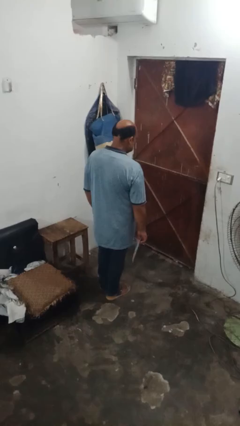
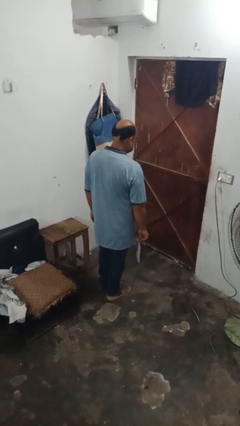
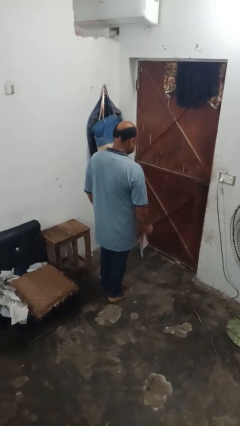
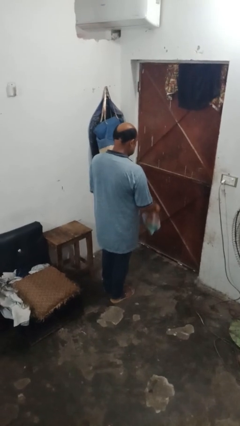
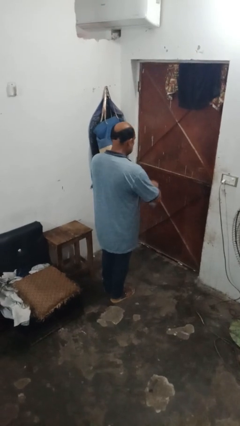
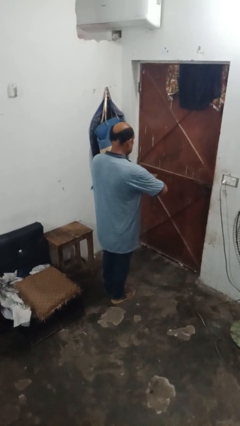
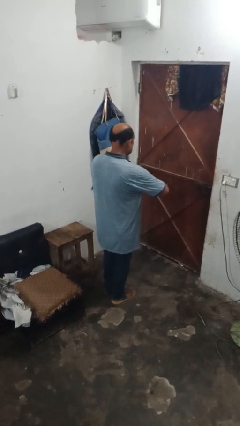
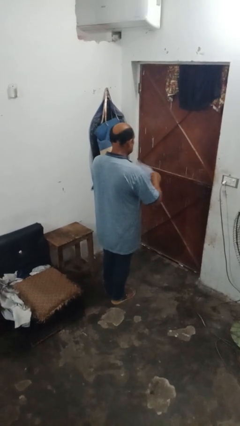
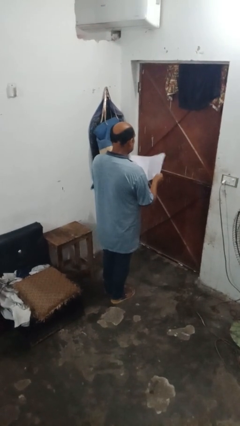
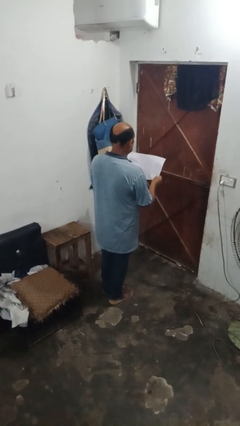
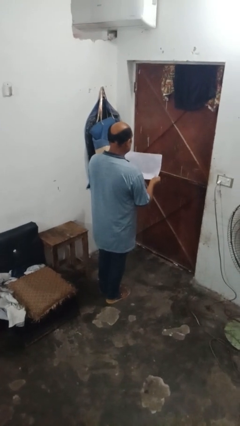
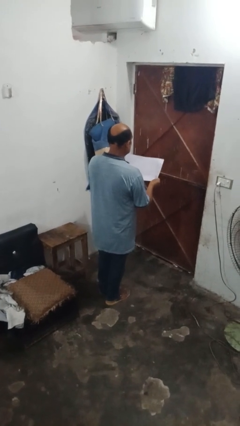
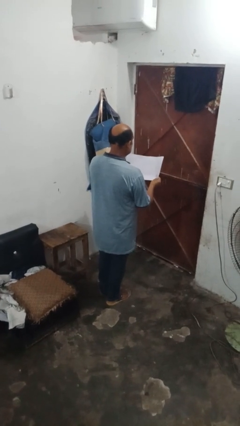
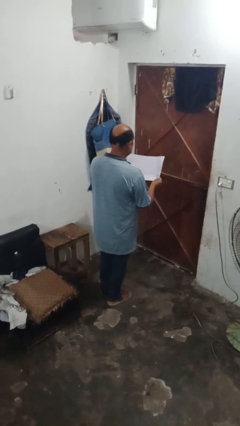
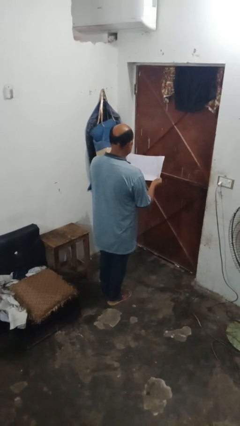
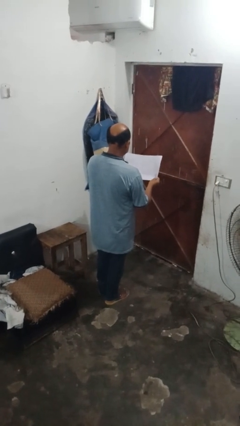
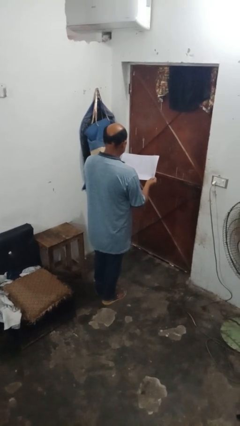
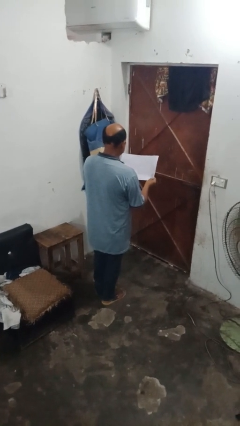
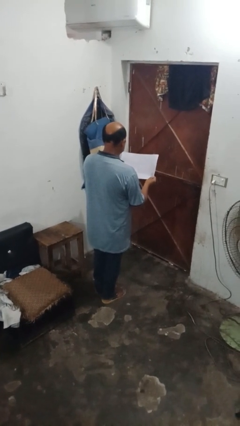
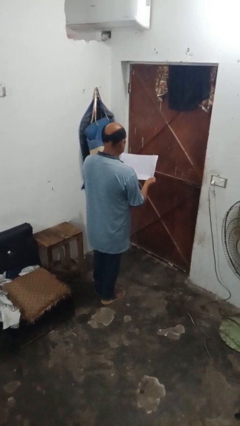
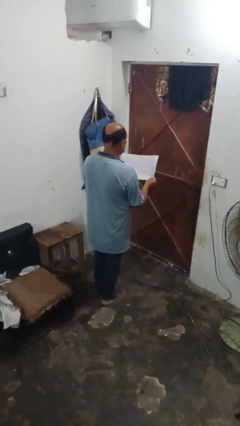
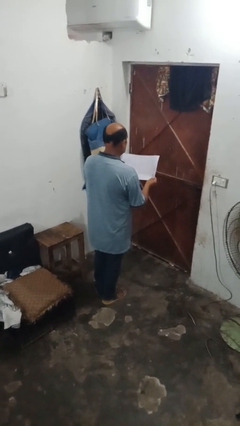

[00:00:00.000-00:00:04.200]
person reads newspaper

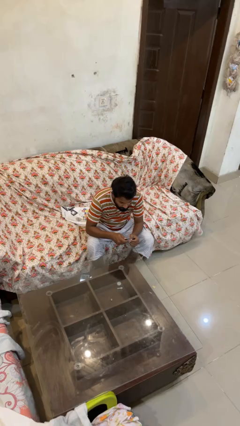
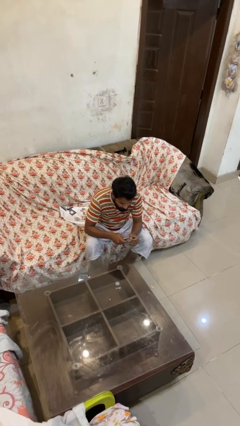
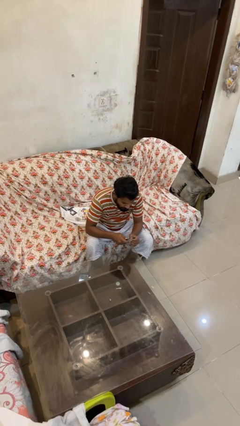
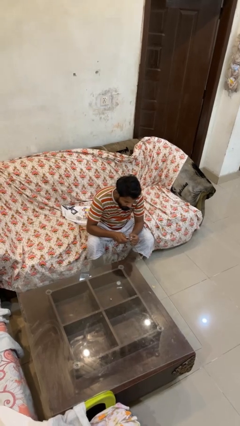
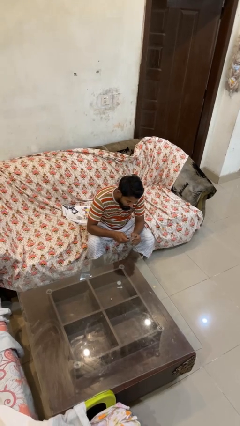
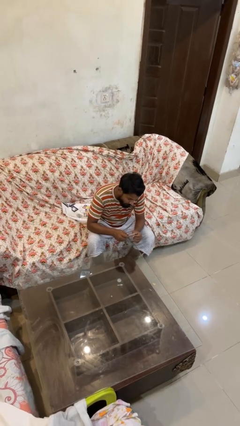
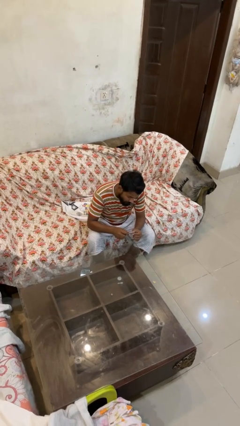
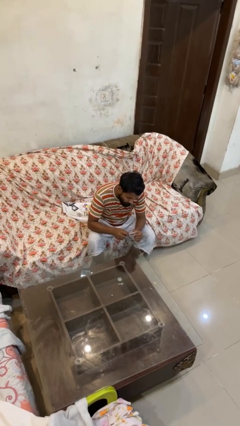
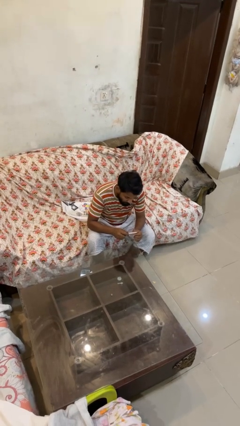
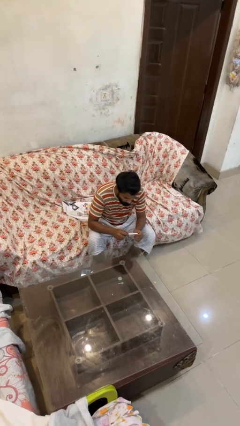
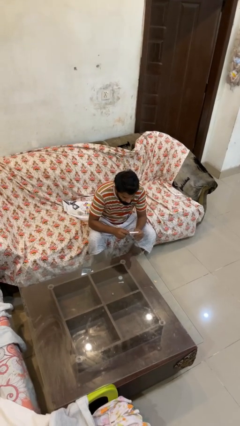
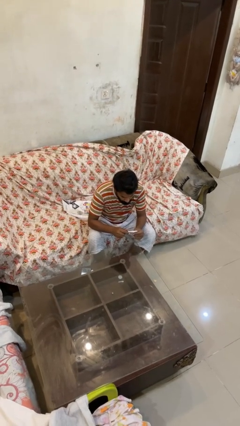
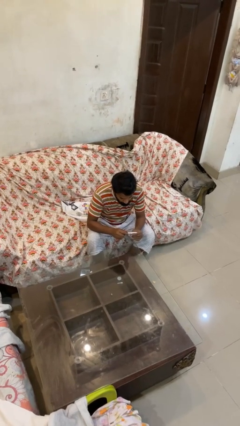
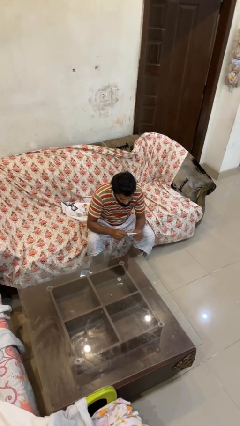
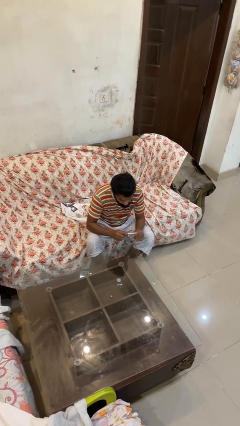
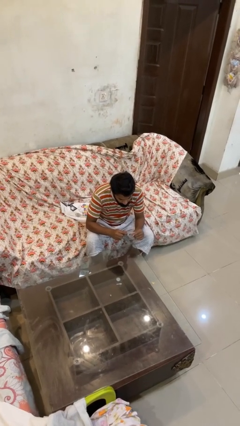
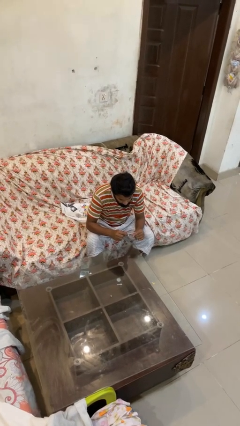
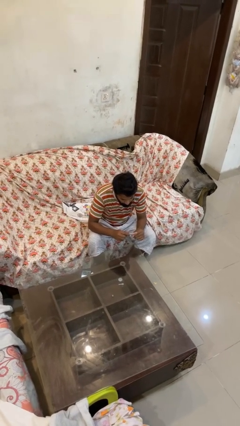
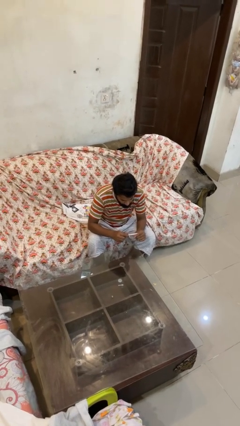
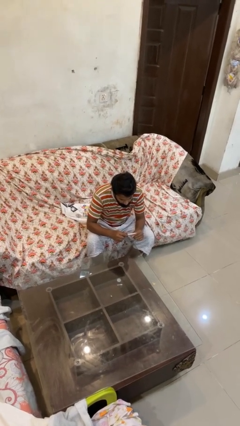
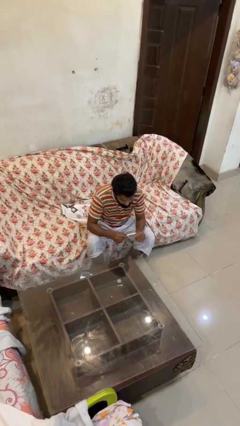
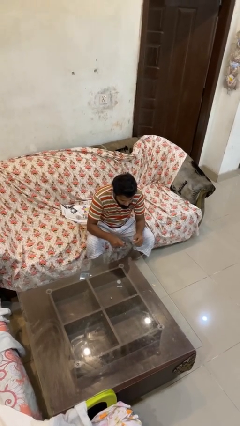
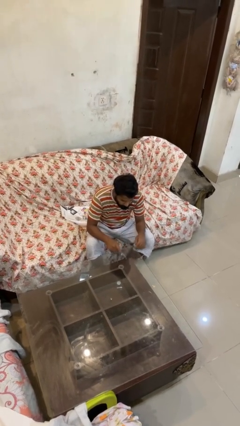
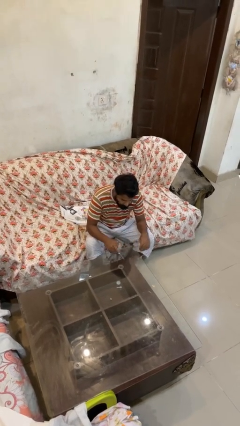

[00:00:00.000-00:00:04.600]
person files fingernails

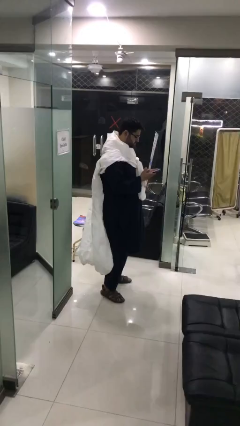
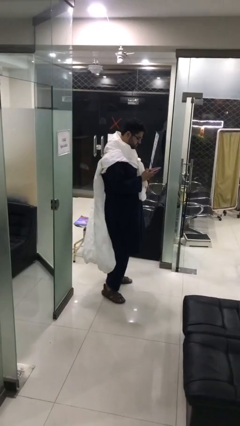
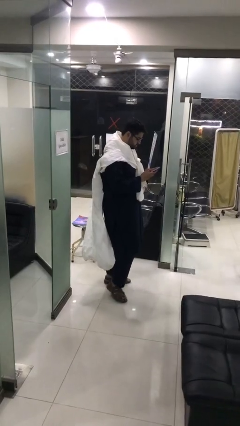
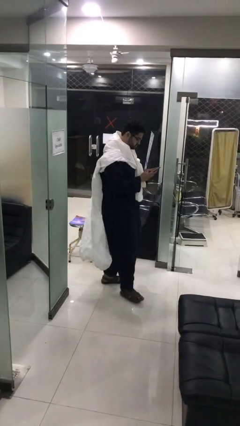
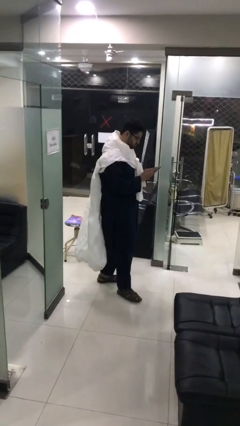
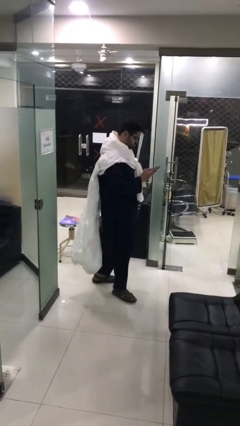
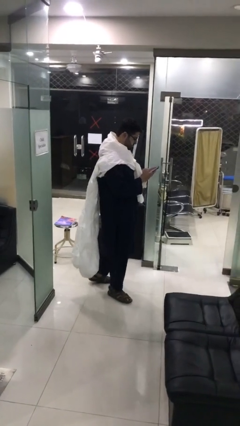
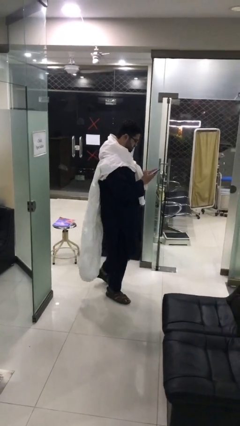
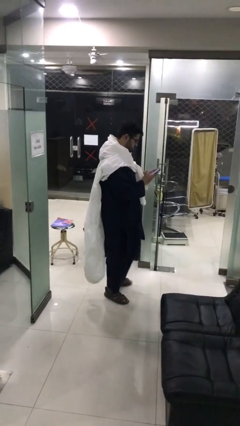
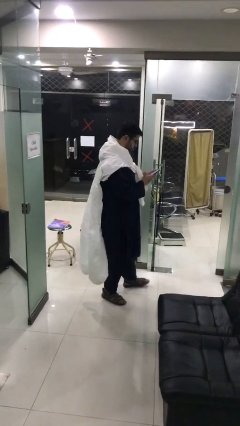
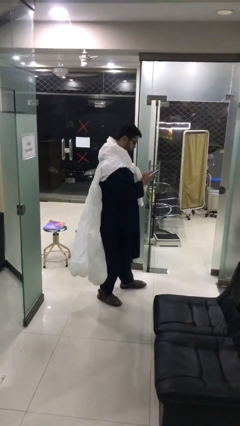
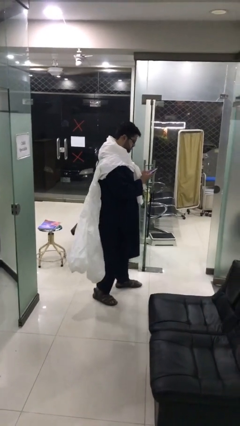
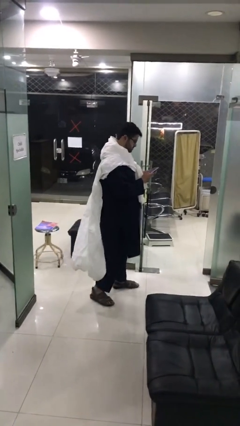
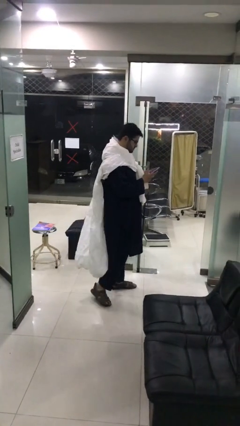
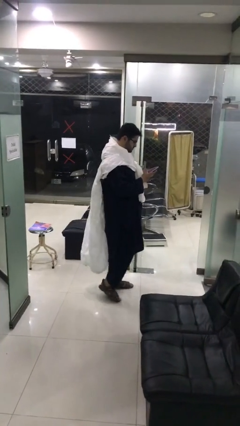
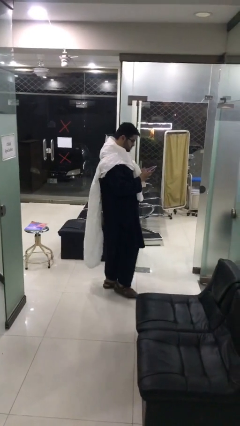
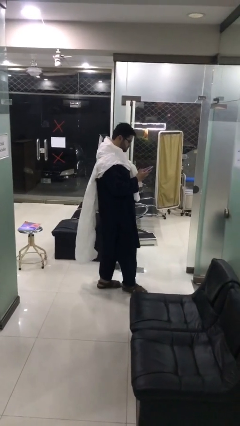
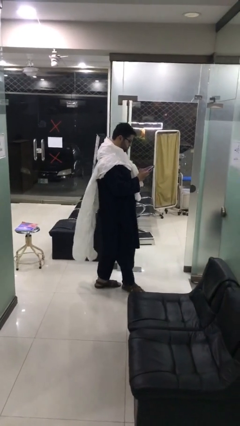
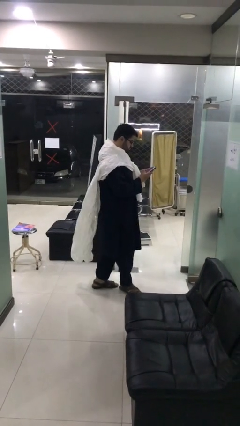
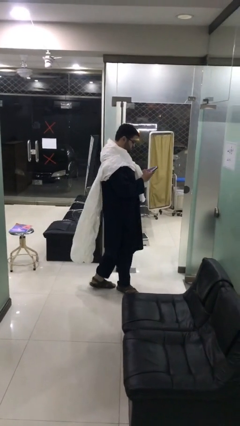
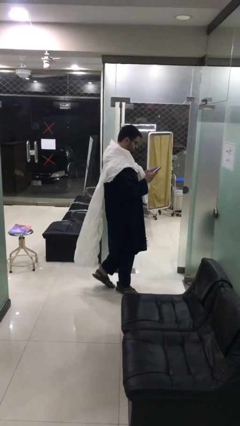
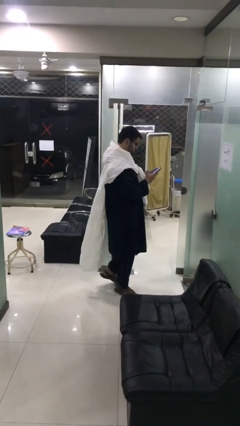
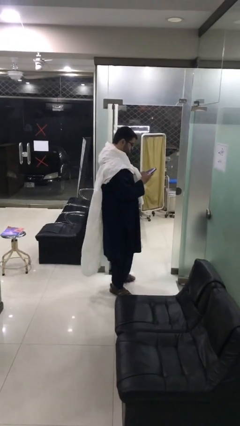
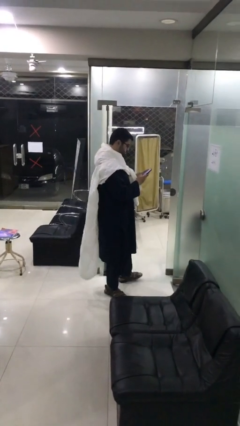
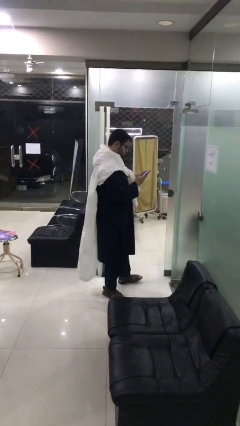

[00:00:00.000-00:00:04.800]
person texts on phone

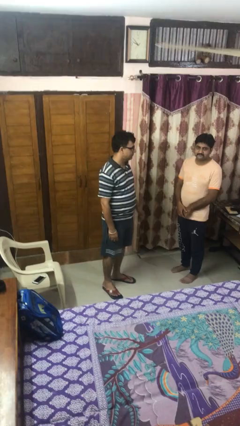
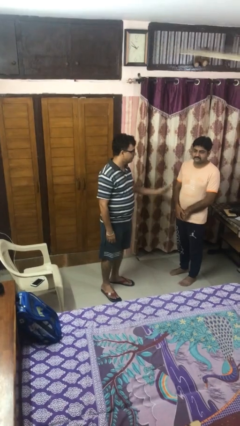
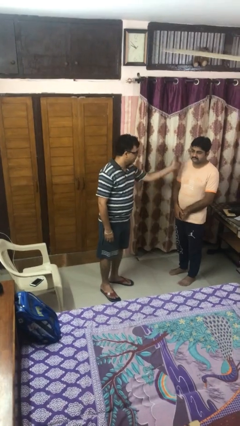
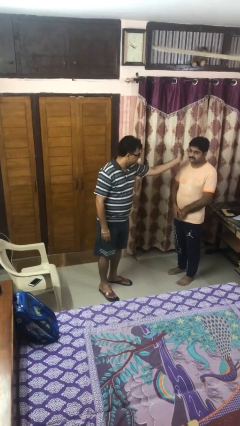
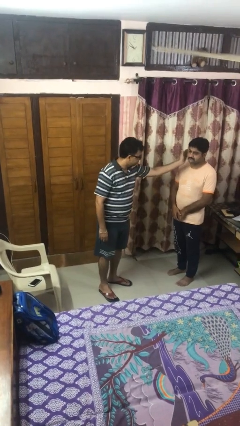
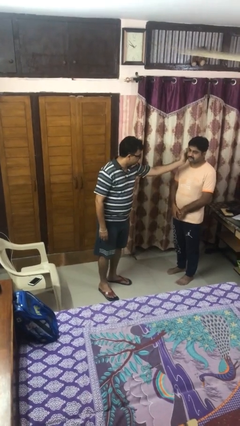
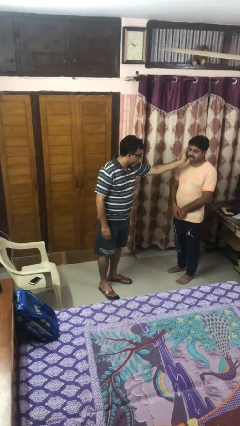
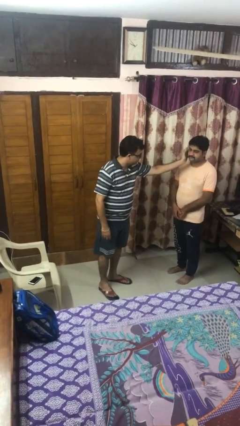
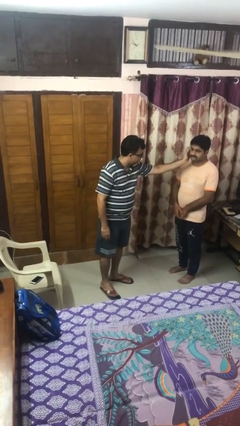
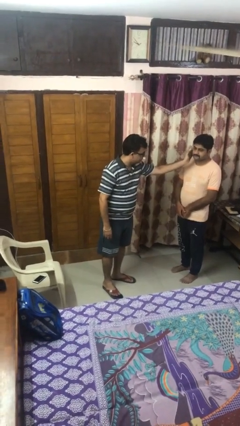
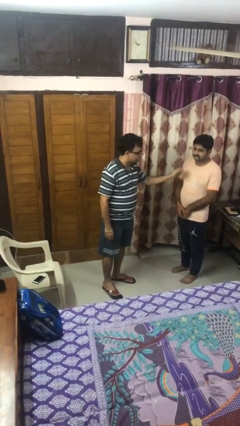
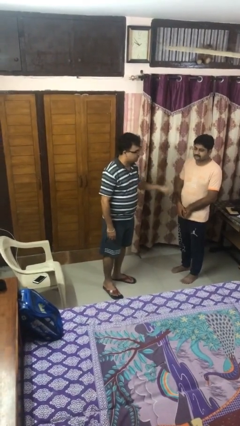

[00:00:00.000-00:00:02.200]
person touches face of person

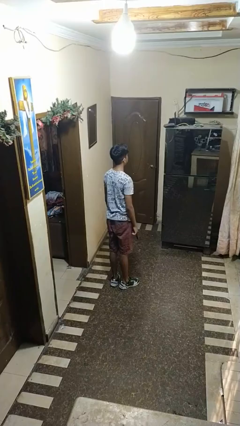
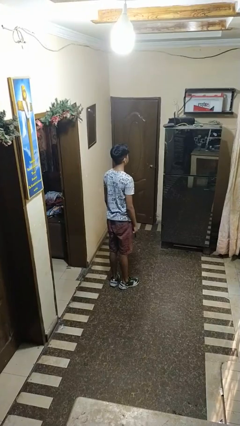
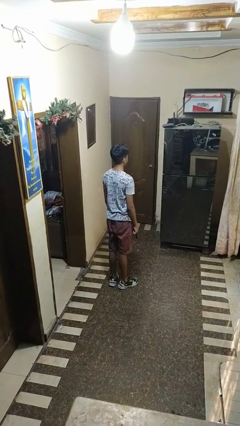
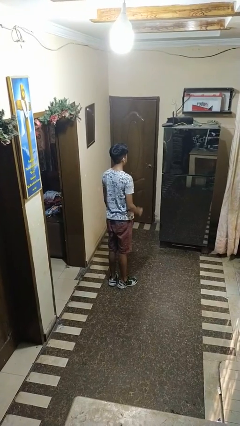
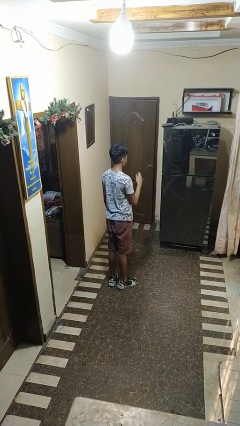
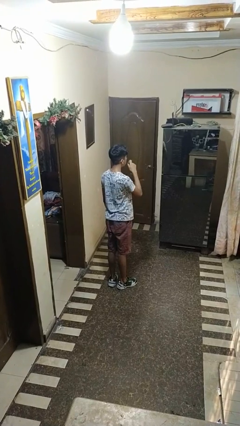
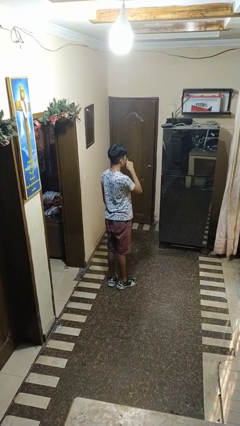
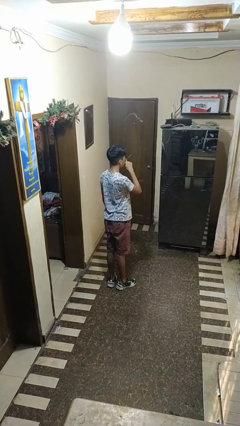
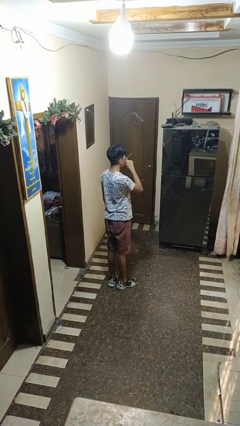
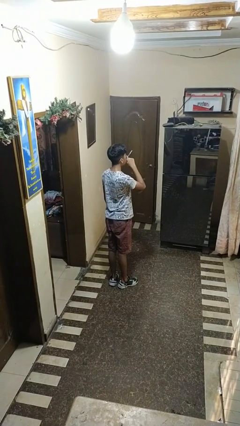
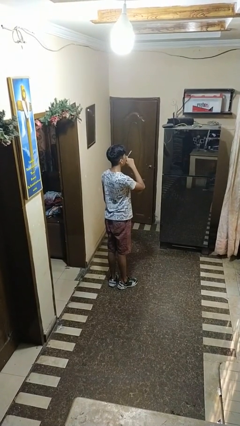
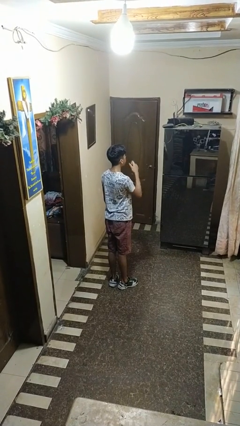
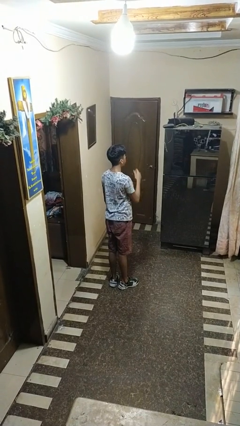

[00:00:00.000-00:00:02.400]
person vapes
